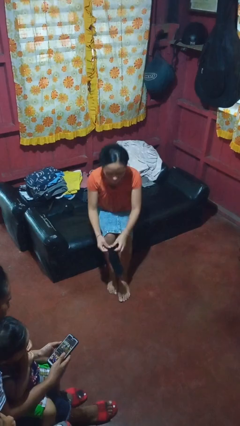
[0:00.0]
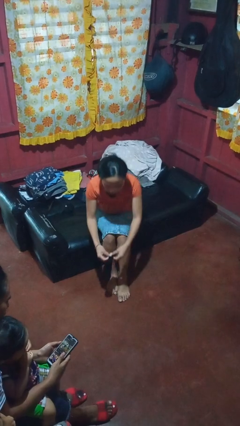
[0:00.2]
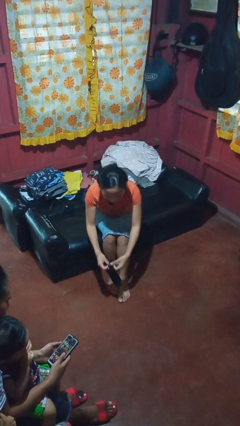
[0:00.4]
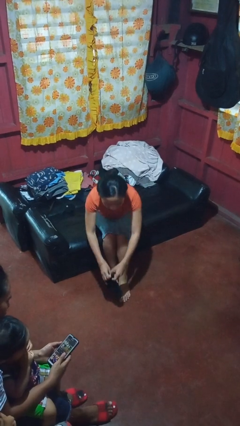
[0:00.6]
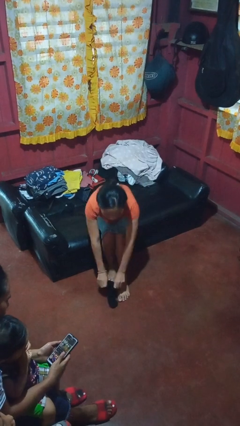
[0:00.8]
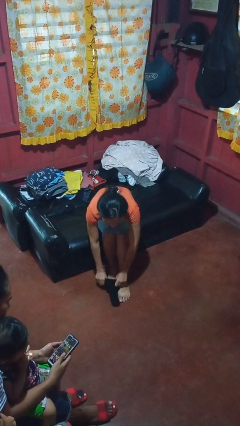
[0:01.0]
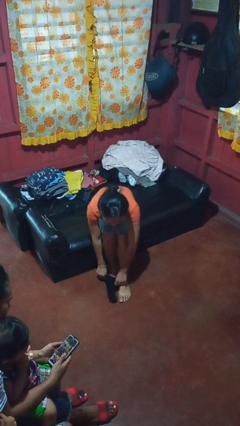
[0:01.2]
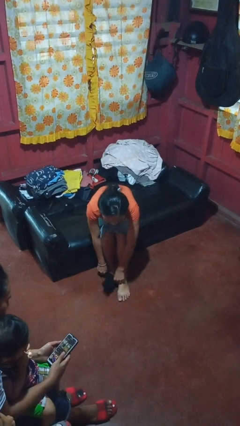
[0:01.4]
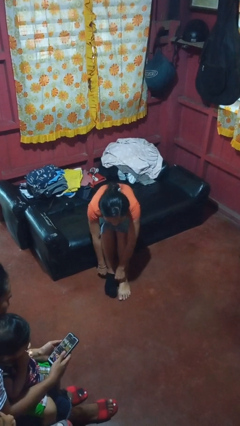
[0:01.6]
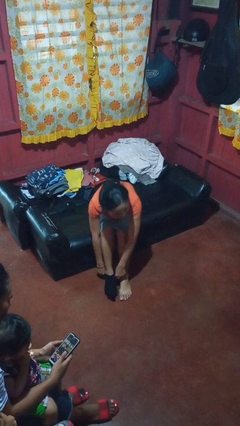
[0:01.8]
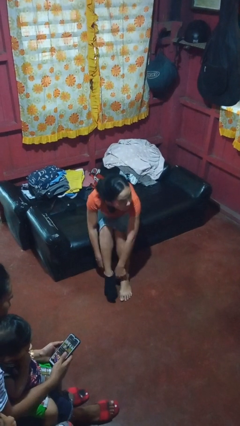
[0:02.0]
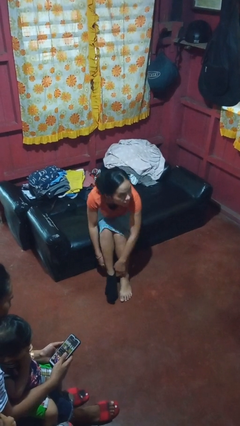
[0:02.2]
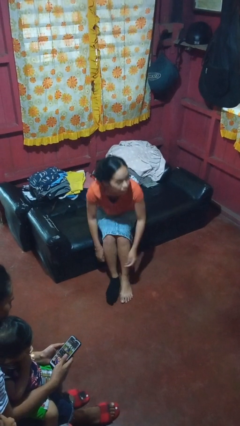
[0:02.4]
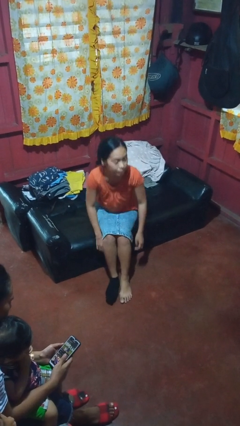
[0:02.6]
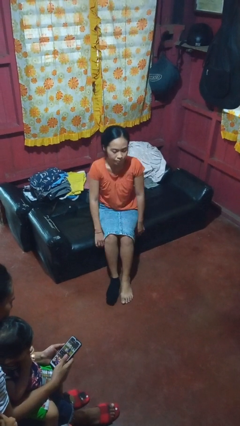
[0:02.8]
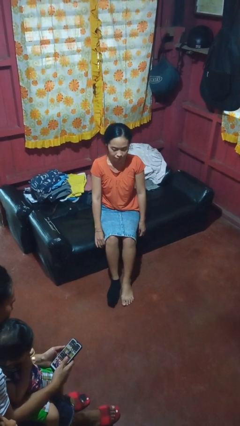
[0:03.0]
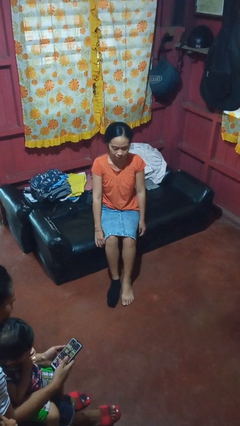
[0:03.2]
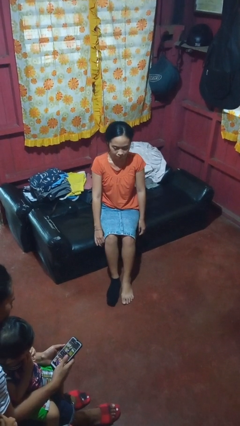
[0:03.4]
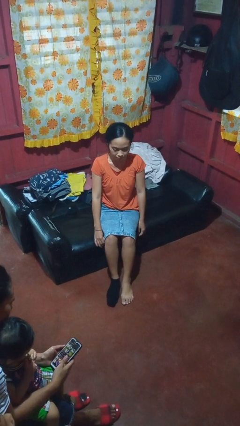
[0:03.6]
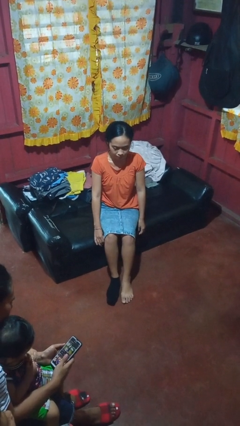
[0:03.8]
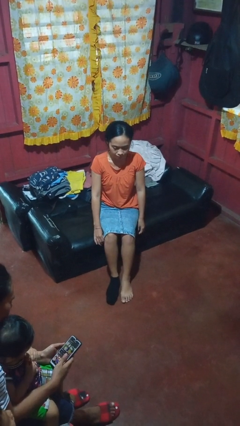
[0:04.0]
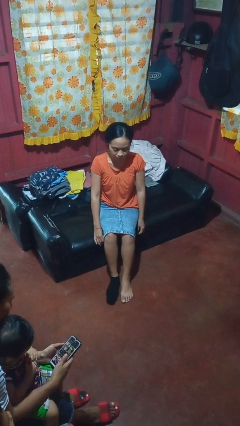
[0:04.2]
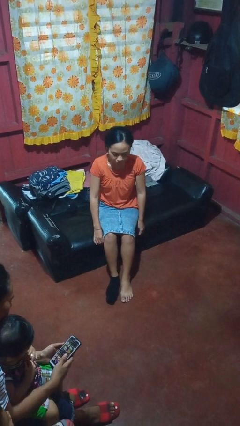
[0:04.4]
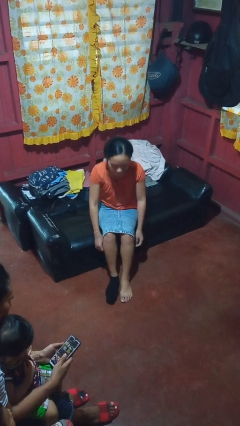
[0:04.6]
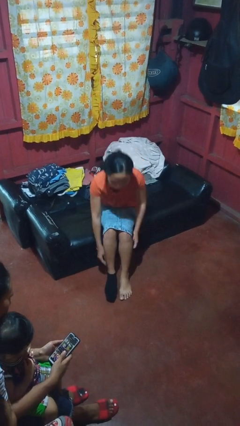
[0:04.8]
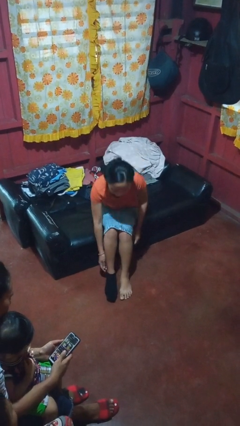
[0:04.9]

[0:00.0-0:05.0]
person puts on socks

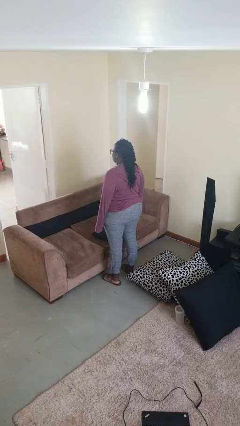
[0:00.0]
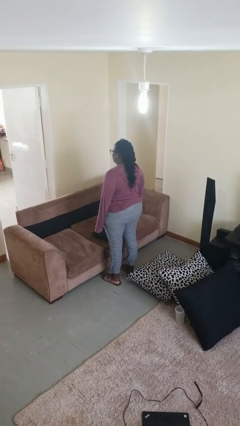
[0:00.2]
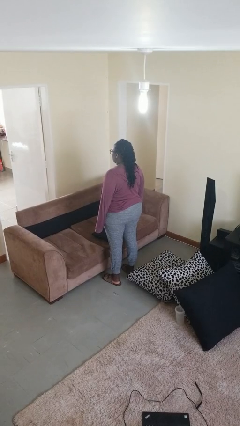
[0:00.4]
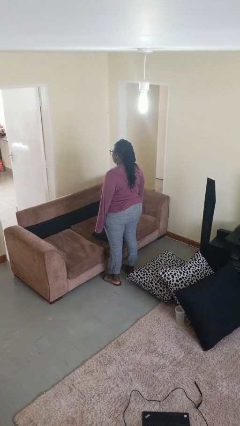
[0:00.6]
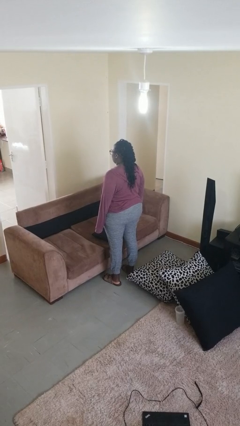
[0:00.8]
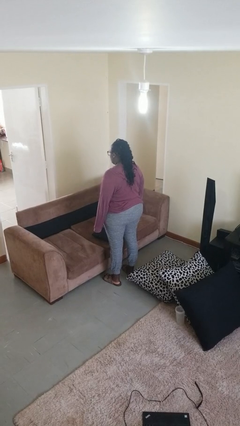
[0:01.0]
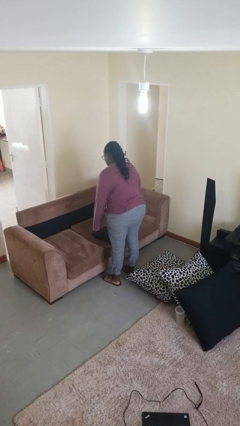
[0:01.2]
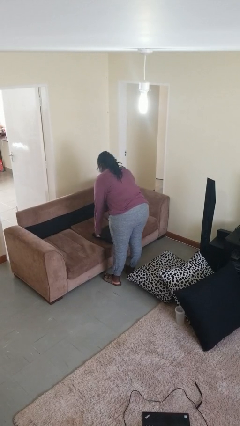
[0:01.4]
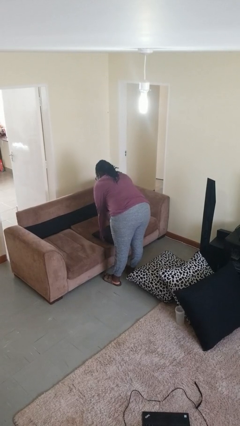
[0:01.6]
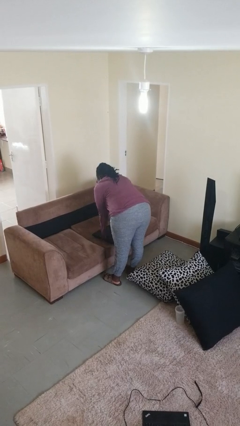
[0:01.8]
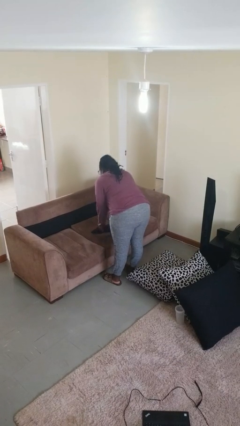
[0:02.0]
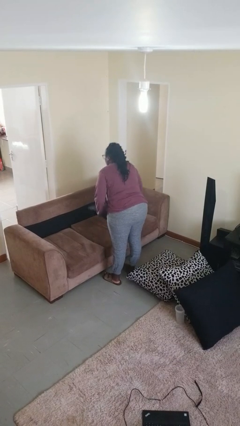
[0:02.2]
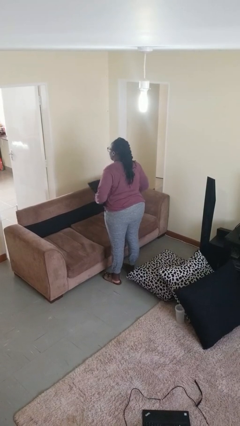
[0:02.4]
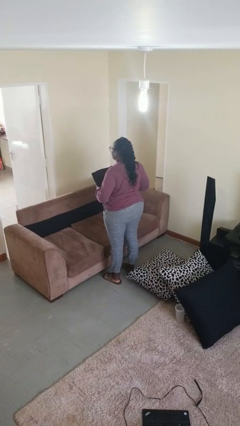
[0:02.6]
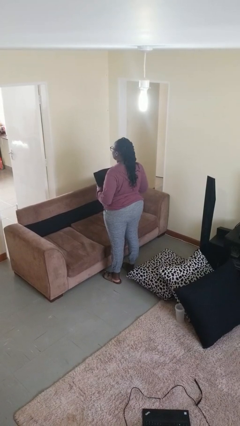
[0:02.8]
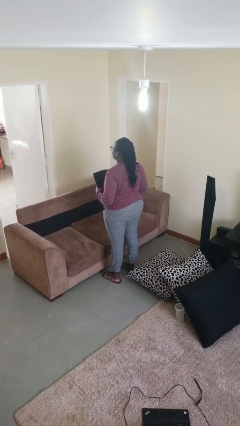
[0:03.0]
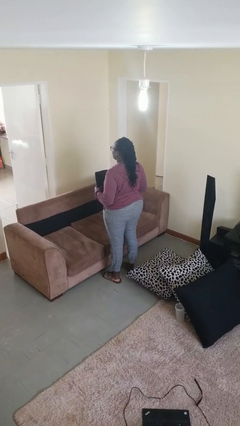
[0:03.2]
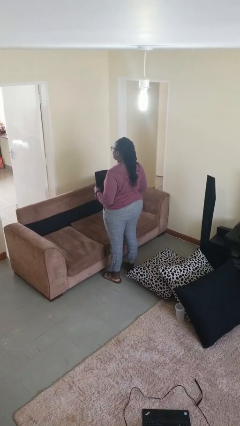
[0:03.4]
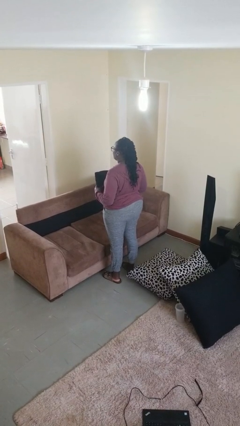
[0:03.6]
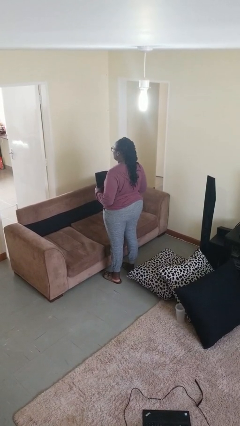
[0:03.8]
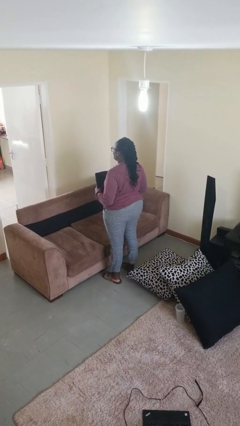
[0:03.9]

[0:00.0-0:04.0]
person picks up object from couch

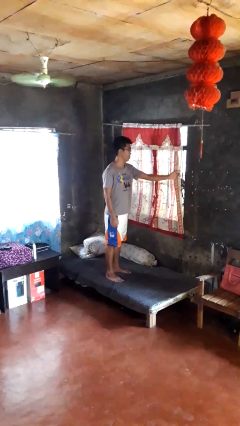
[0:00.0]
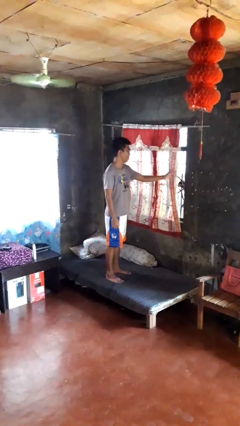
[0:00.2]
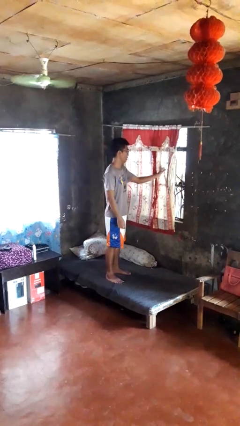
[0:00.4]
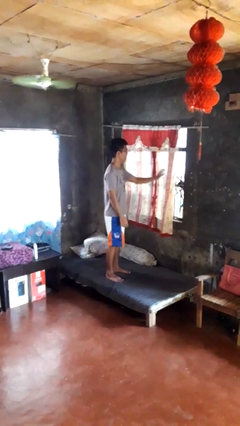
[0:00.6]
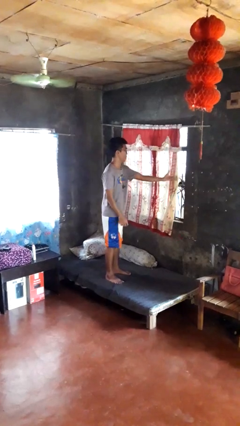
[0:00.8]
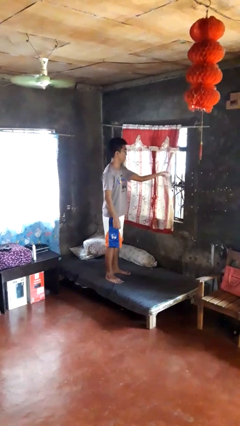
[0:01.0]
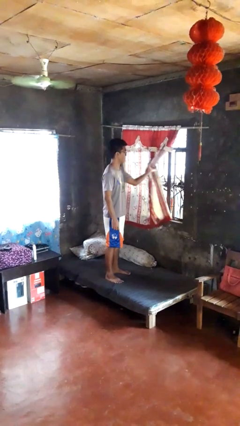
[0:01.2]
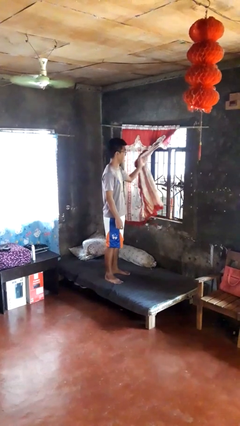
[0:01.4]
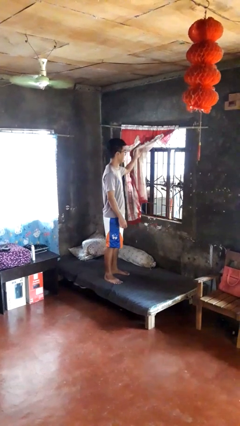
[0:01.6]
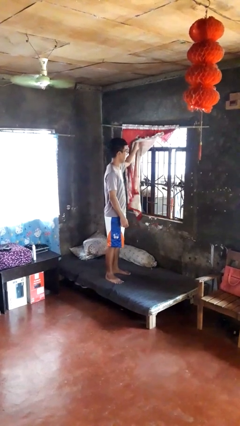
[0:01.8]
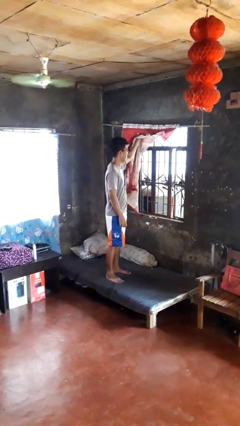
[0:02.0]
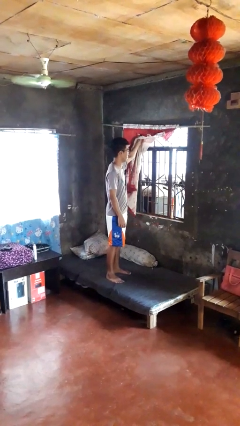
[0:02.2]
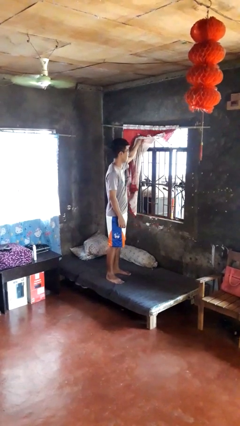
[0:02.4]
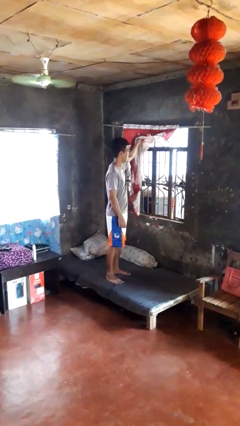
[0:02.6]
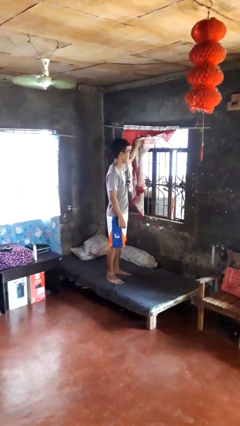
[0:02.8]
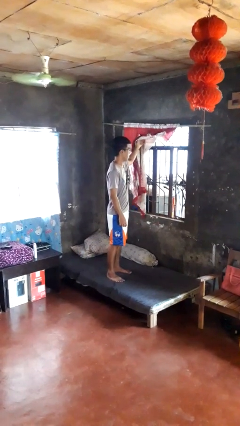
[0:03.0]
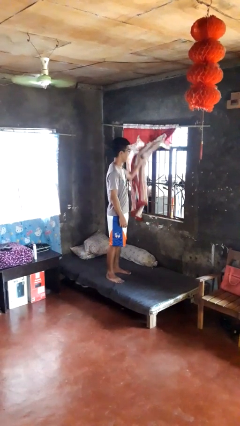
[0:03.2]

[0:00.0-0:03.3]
person opens curtains

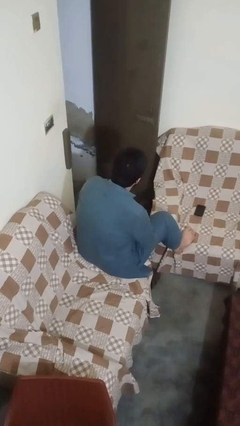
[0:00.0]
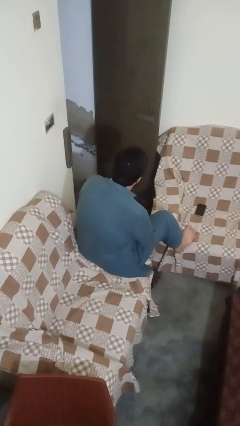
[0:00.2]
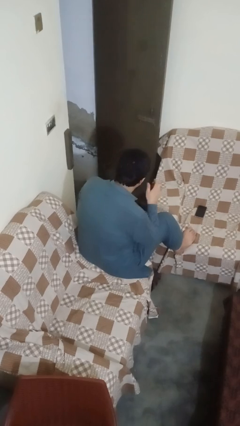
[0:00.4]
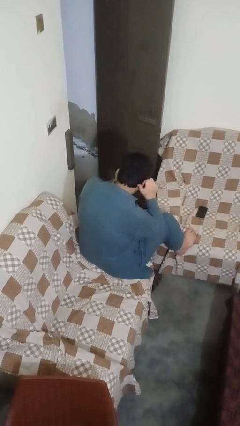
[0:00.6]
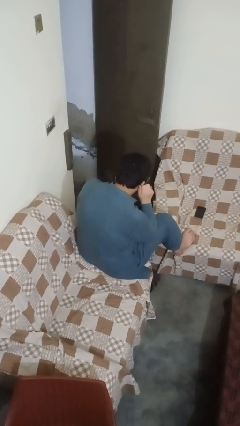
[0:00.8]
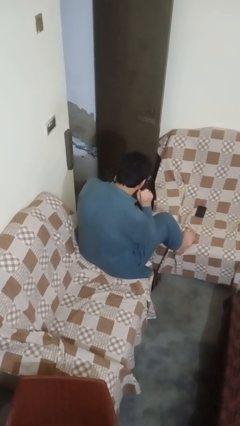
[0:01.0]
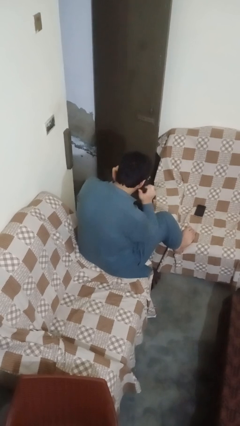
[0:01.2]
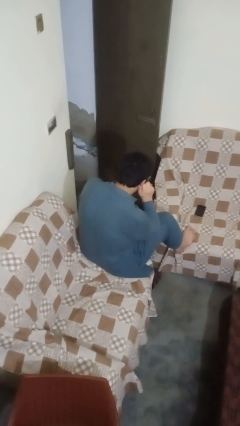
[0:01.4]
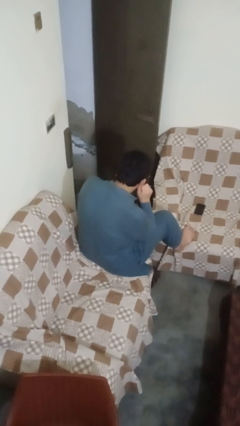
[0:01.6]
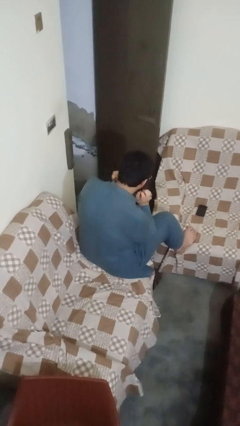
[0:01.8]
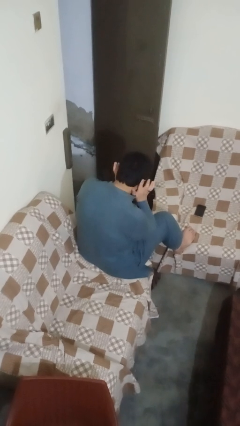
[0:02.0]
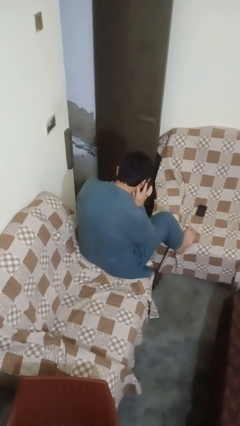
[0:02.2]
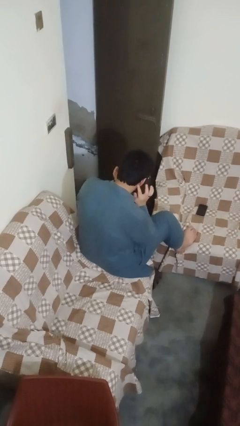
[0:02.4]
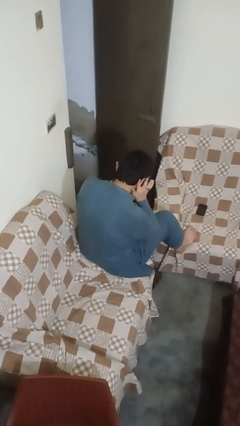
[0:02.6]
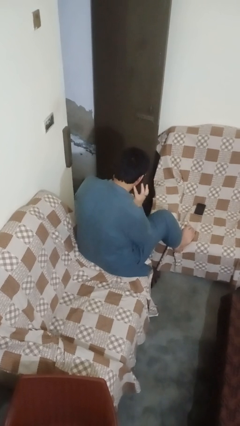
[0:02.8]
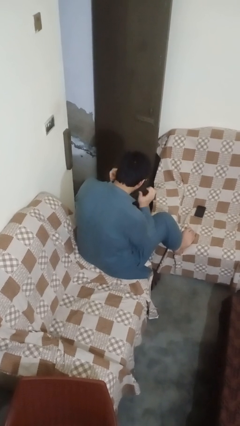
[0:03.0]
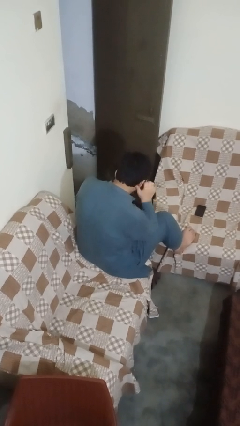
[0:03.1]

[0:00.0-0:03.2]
person touches earlobe

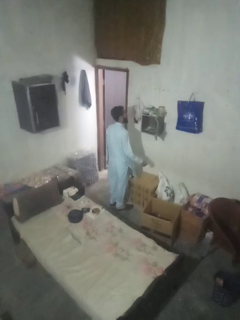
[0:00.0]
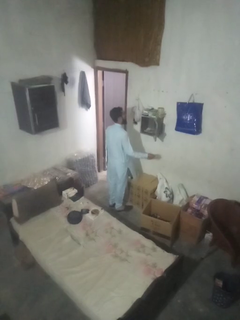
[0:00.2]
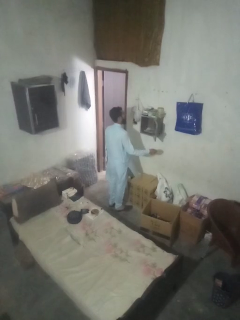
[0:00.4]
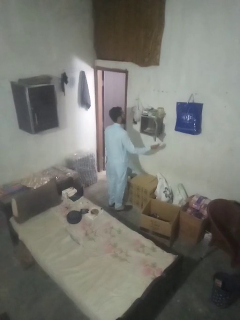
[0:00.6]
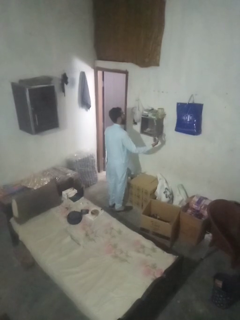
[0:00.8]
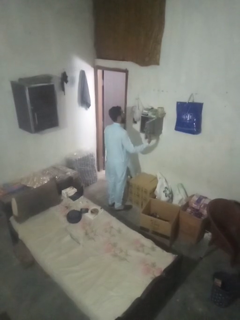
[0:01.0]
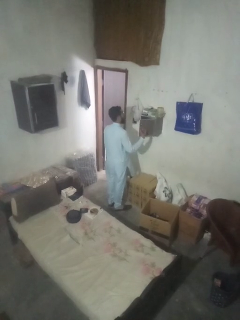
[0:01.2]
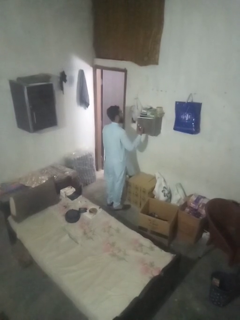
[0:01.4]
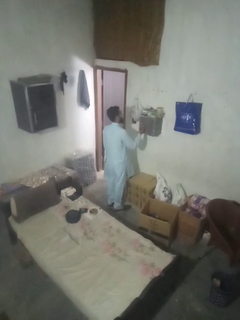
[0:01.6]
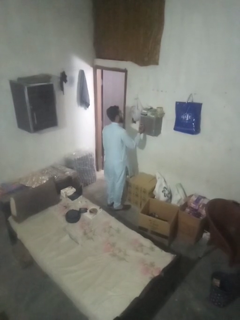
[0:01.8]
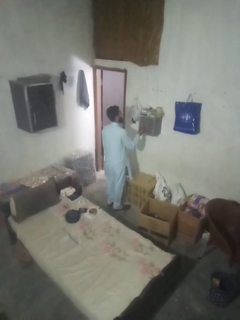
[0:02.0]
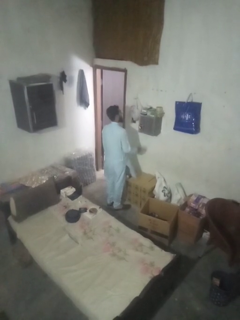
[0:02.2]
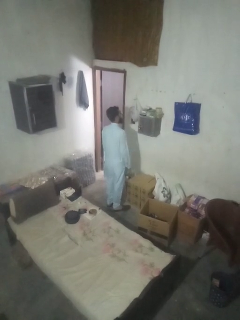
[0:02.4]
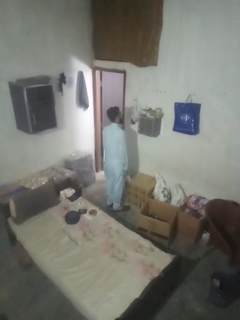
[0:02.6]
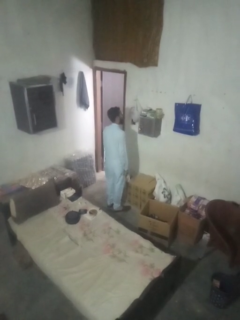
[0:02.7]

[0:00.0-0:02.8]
person closes mailbox
